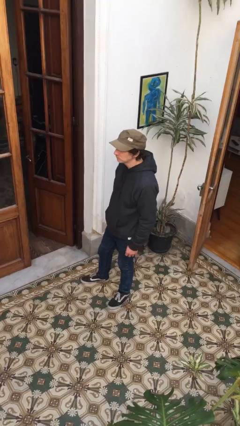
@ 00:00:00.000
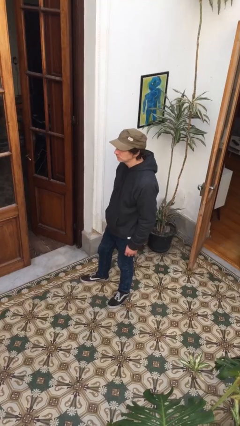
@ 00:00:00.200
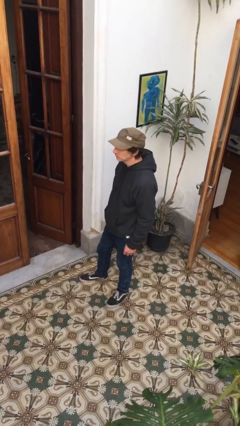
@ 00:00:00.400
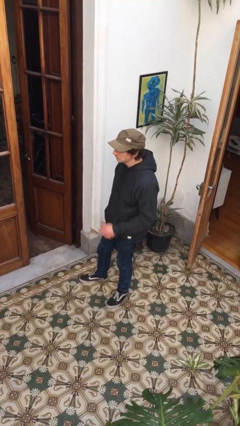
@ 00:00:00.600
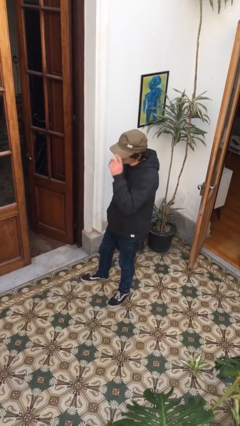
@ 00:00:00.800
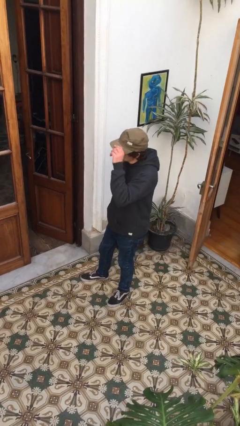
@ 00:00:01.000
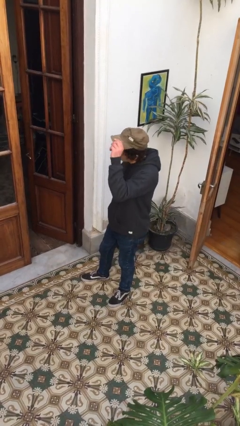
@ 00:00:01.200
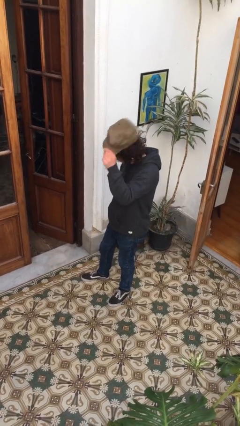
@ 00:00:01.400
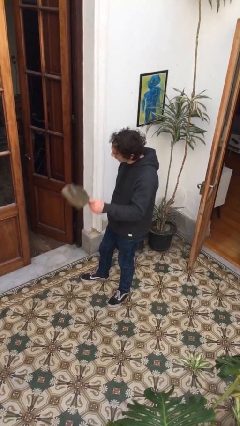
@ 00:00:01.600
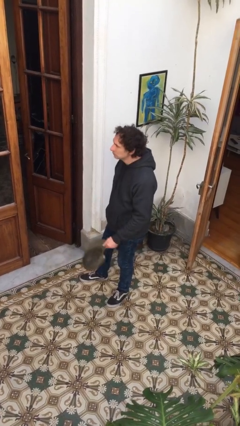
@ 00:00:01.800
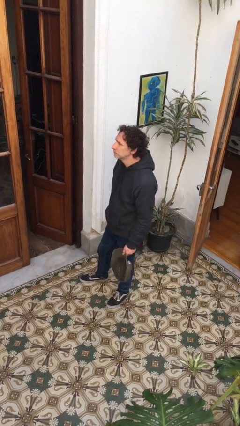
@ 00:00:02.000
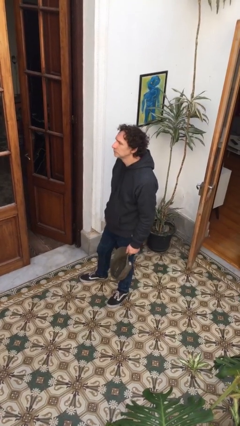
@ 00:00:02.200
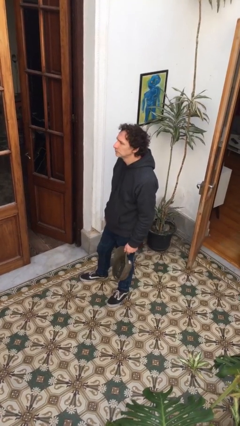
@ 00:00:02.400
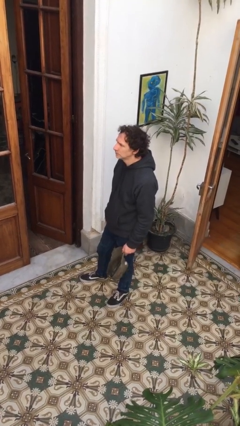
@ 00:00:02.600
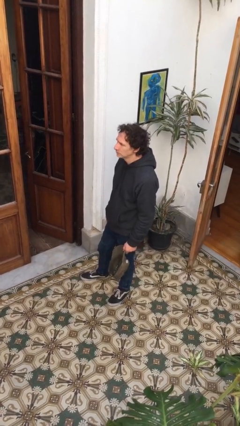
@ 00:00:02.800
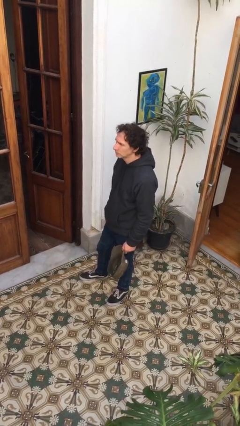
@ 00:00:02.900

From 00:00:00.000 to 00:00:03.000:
person takes off hat

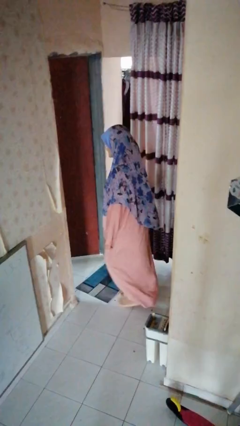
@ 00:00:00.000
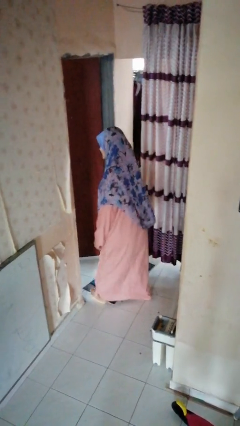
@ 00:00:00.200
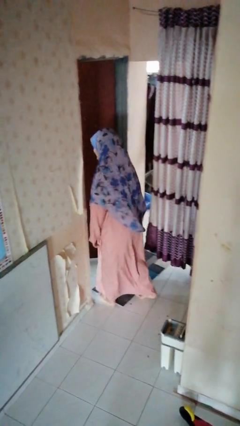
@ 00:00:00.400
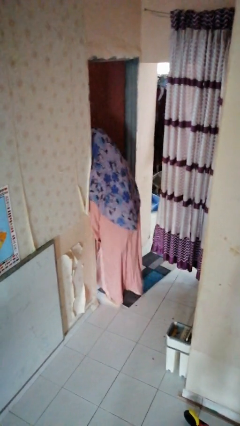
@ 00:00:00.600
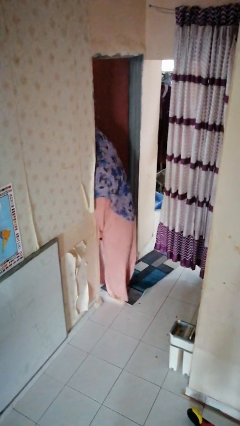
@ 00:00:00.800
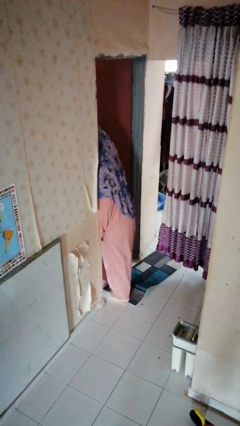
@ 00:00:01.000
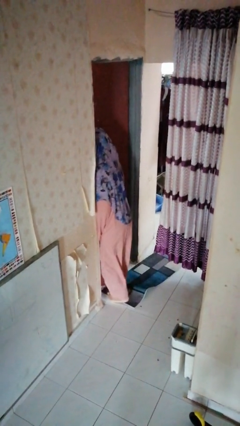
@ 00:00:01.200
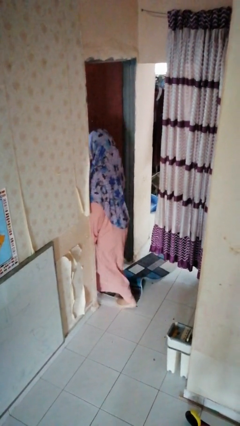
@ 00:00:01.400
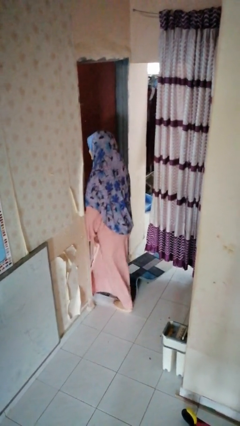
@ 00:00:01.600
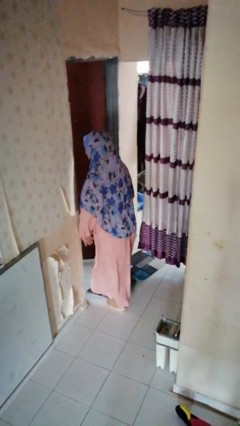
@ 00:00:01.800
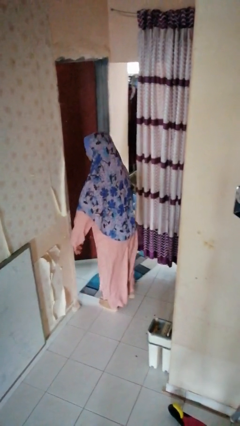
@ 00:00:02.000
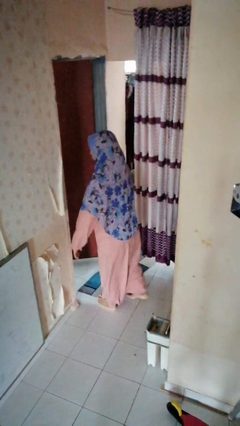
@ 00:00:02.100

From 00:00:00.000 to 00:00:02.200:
person bumps into wall

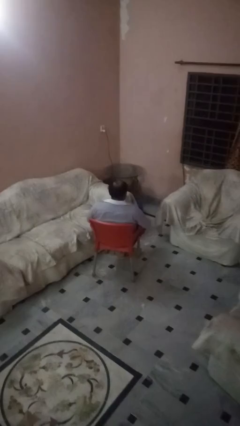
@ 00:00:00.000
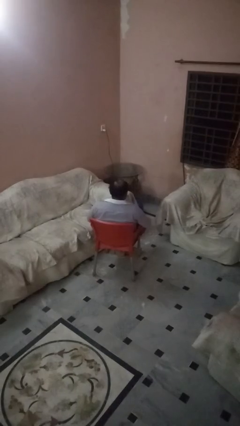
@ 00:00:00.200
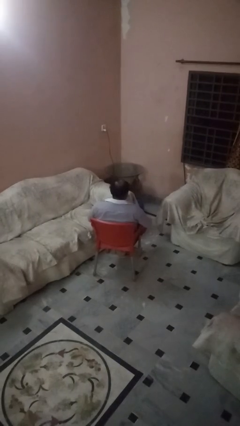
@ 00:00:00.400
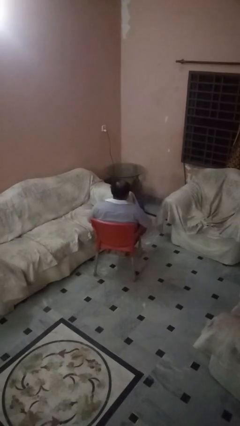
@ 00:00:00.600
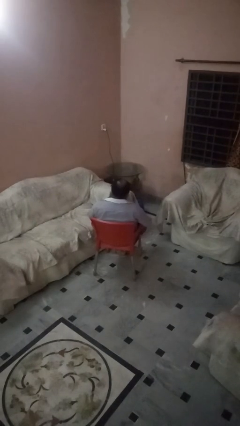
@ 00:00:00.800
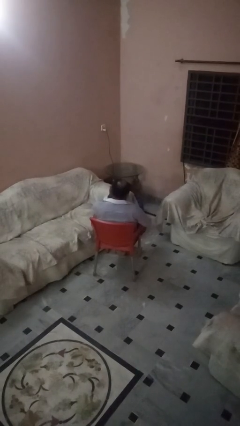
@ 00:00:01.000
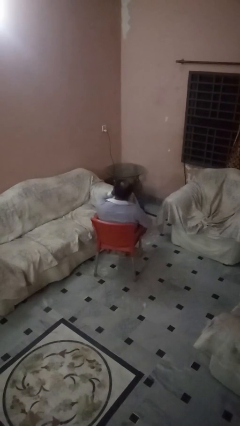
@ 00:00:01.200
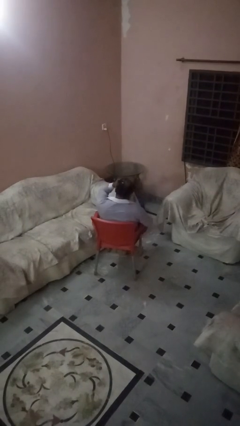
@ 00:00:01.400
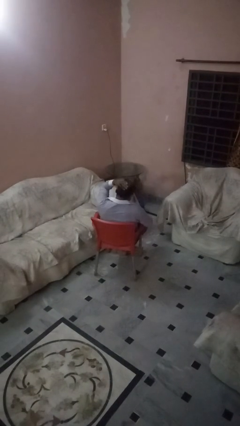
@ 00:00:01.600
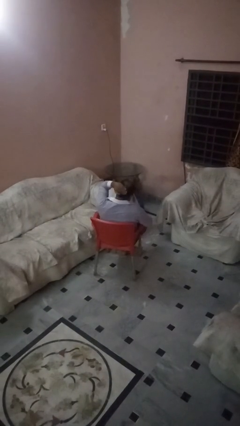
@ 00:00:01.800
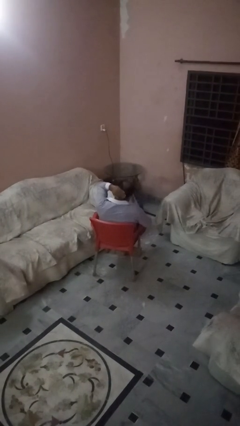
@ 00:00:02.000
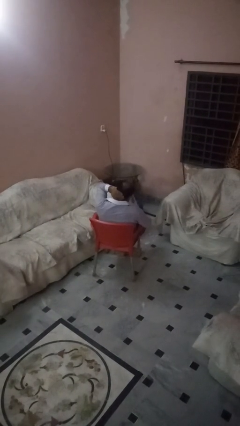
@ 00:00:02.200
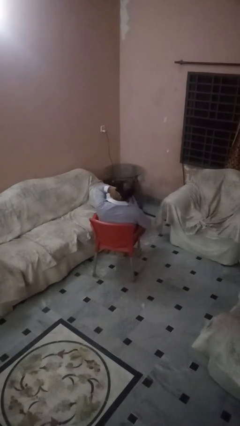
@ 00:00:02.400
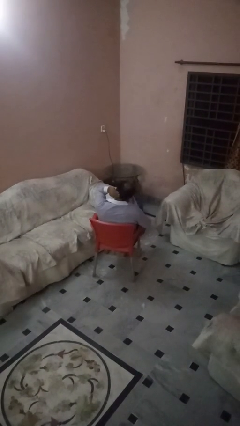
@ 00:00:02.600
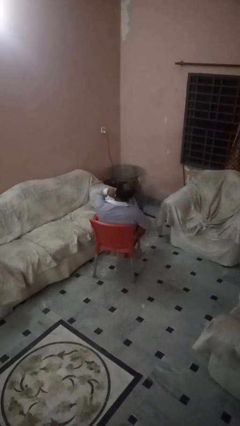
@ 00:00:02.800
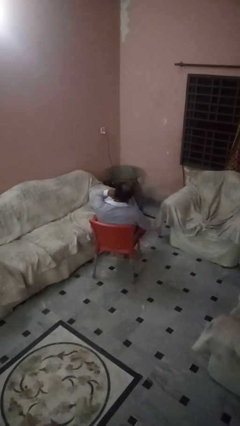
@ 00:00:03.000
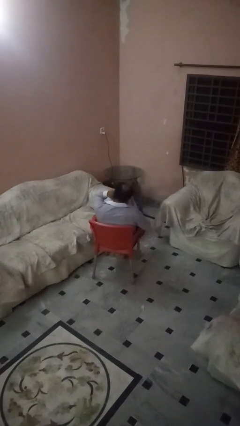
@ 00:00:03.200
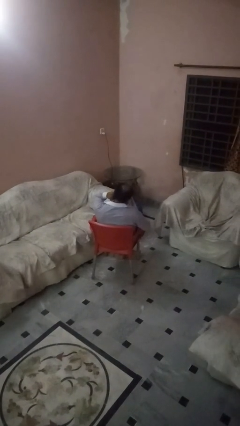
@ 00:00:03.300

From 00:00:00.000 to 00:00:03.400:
person strokes hair

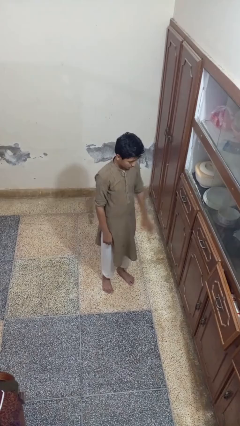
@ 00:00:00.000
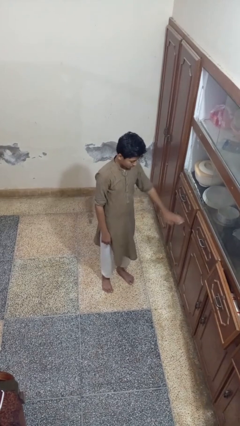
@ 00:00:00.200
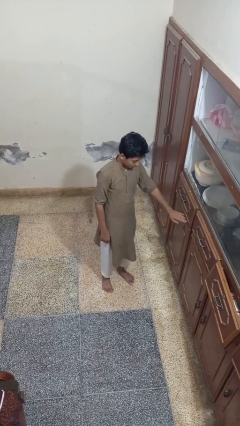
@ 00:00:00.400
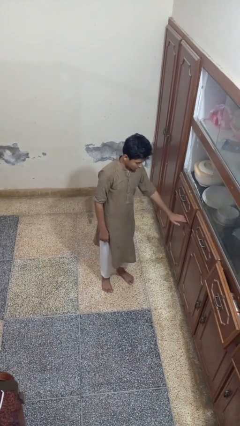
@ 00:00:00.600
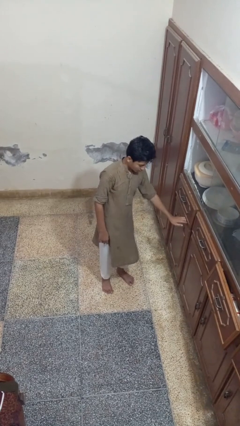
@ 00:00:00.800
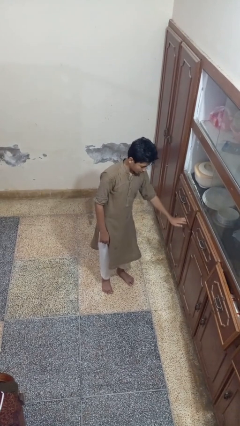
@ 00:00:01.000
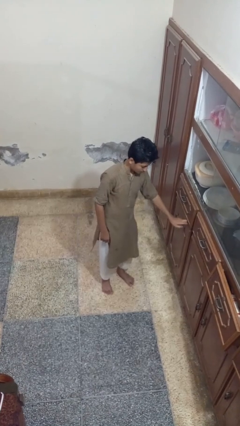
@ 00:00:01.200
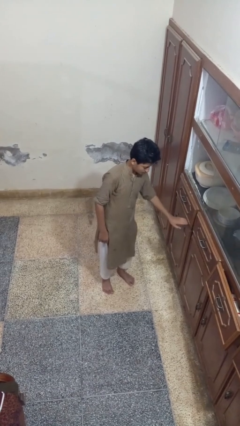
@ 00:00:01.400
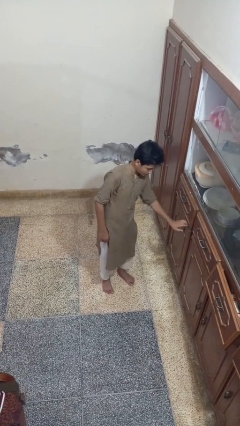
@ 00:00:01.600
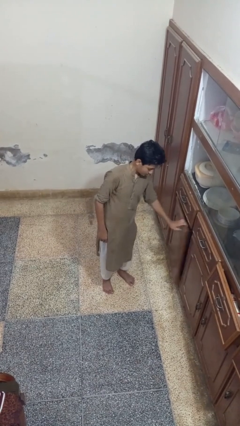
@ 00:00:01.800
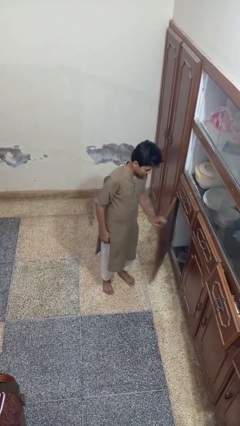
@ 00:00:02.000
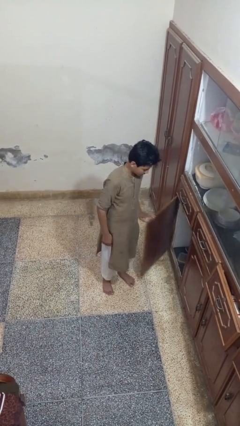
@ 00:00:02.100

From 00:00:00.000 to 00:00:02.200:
person opens cabinet

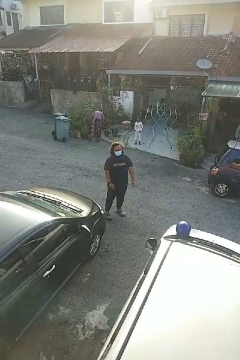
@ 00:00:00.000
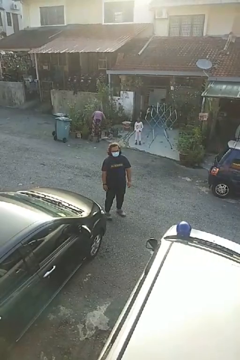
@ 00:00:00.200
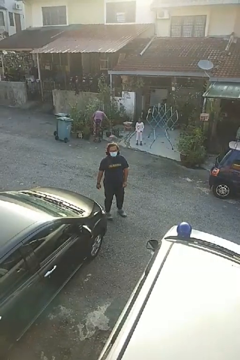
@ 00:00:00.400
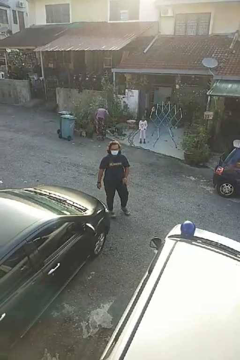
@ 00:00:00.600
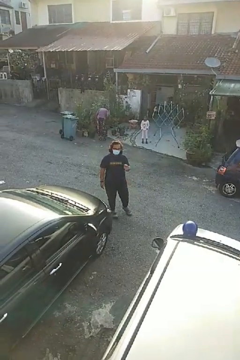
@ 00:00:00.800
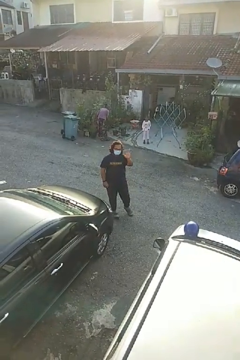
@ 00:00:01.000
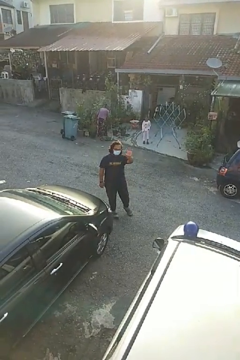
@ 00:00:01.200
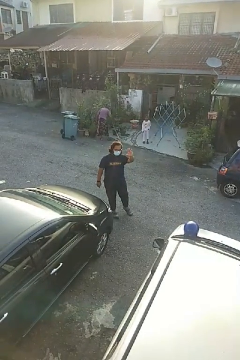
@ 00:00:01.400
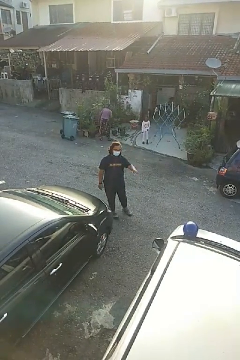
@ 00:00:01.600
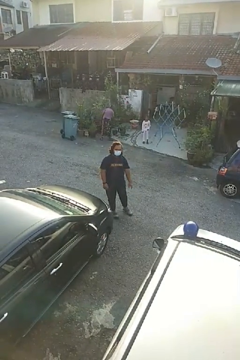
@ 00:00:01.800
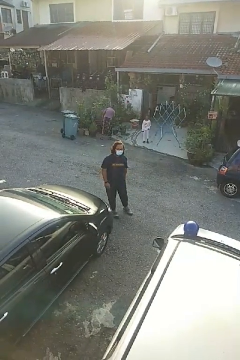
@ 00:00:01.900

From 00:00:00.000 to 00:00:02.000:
person waves at person

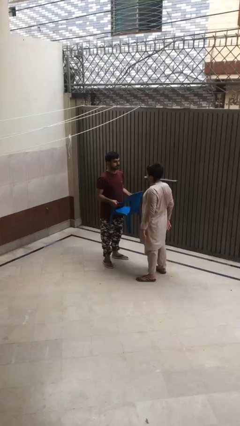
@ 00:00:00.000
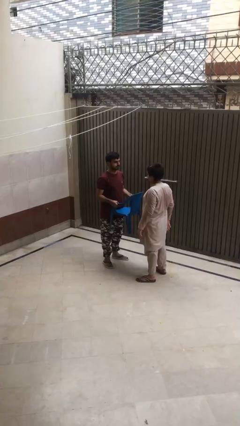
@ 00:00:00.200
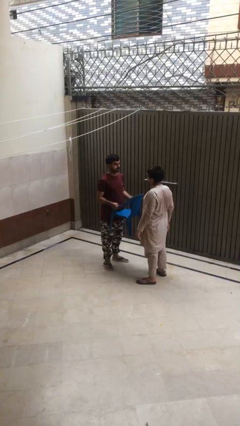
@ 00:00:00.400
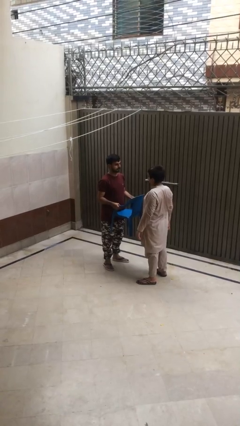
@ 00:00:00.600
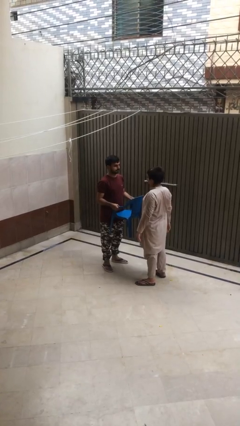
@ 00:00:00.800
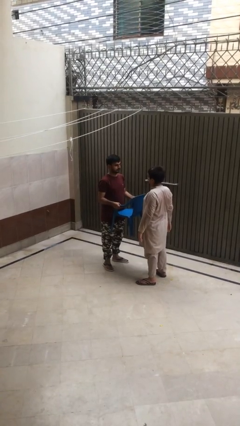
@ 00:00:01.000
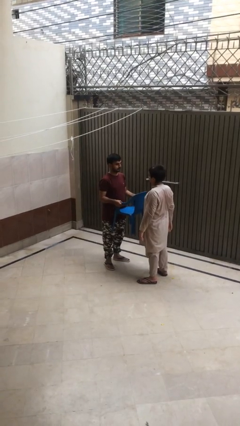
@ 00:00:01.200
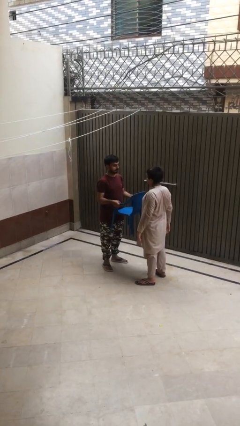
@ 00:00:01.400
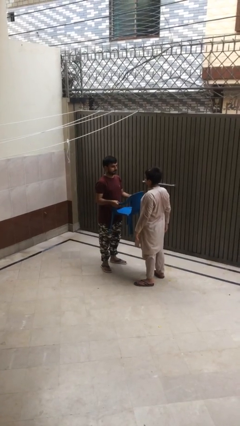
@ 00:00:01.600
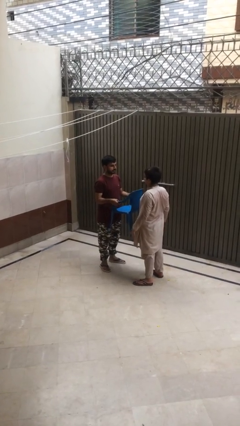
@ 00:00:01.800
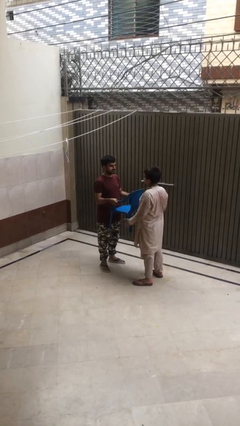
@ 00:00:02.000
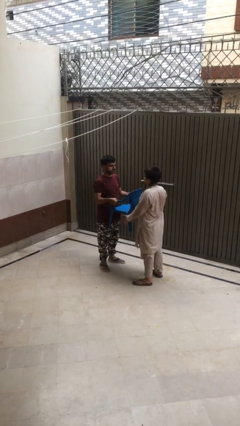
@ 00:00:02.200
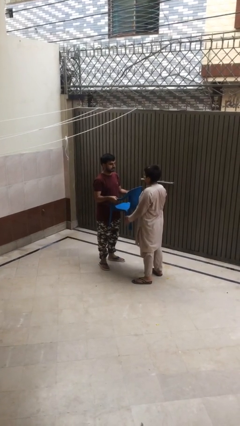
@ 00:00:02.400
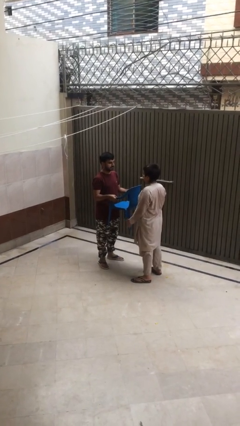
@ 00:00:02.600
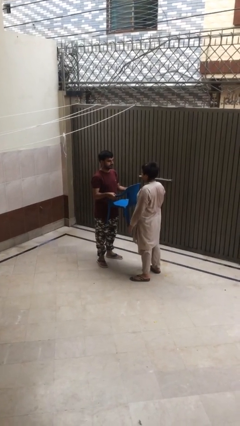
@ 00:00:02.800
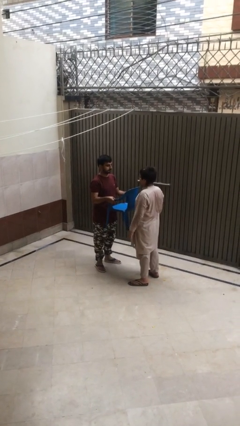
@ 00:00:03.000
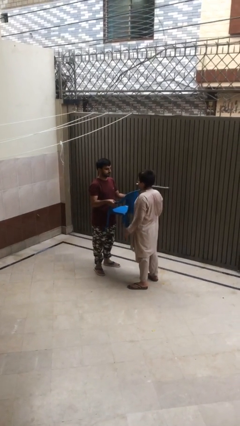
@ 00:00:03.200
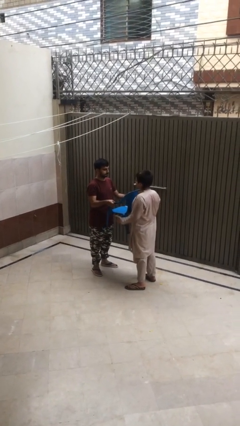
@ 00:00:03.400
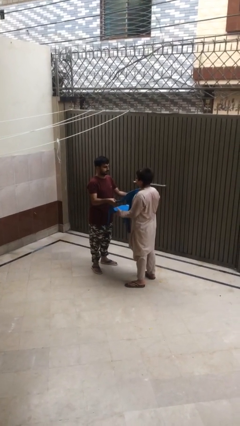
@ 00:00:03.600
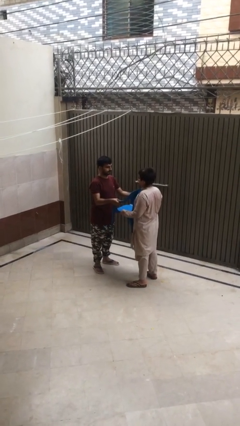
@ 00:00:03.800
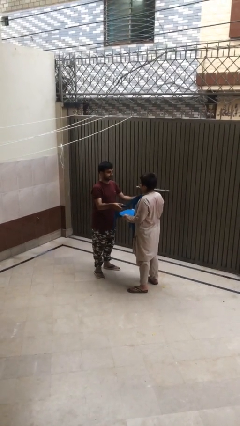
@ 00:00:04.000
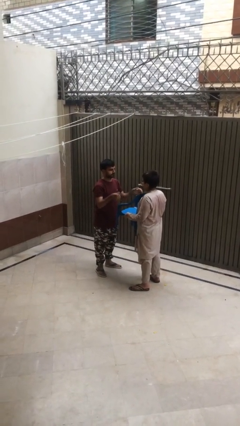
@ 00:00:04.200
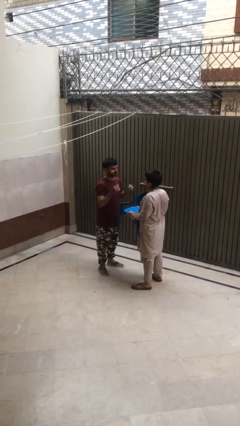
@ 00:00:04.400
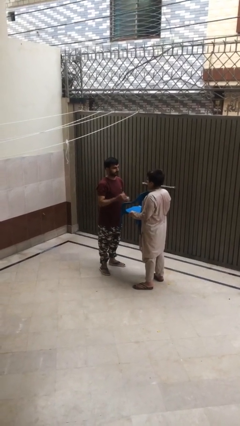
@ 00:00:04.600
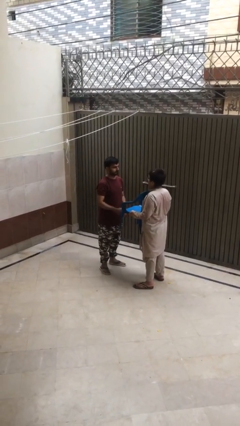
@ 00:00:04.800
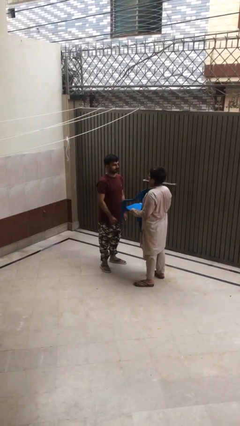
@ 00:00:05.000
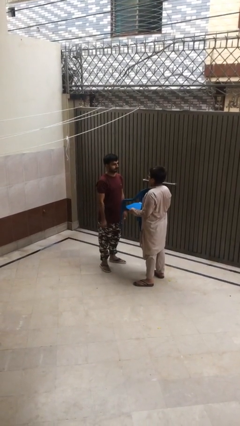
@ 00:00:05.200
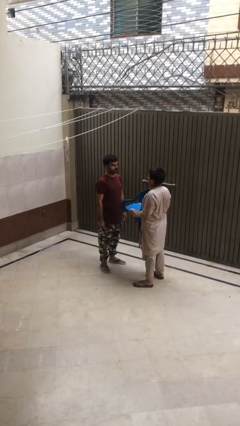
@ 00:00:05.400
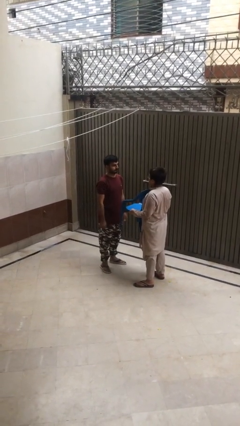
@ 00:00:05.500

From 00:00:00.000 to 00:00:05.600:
person transfers object to person
